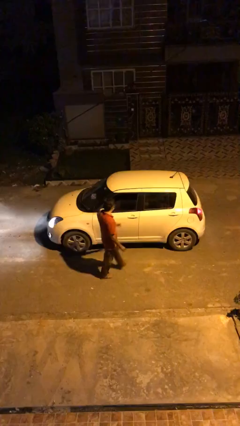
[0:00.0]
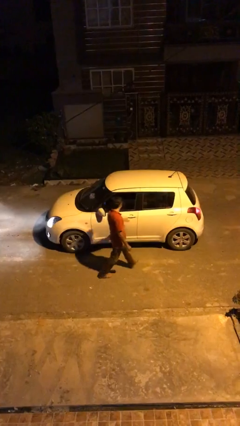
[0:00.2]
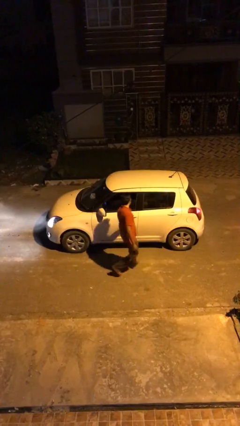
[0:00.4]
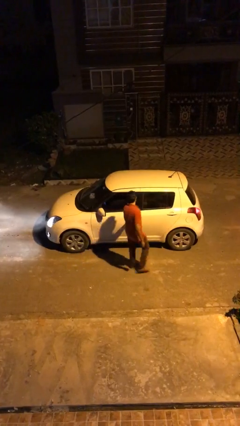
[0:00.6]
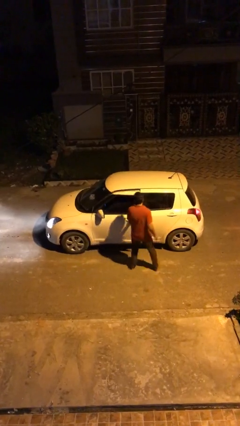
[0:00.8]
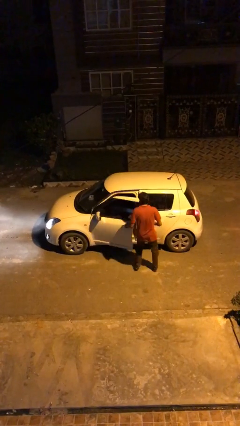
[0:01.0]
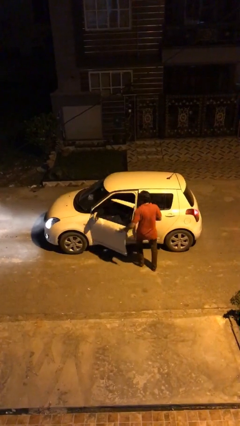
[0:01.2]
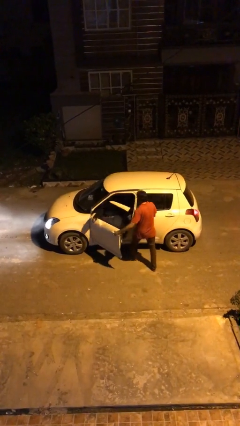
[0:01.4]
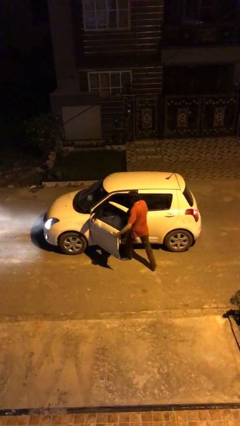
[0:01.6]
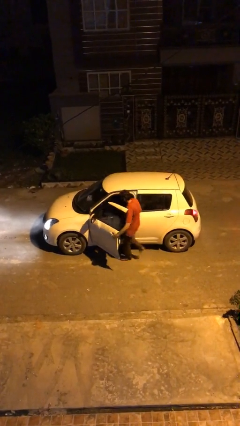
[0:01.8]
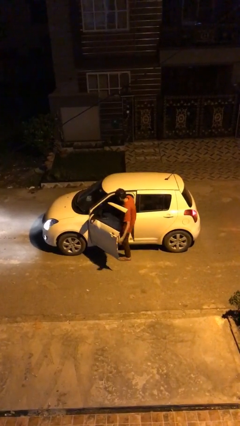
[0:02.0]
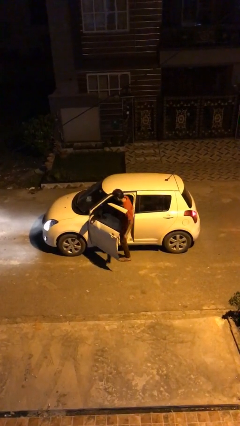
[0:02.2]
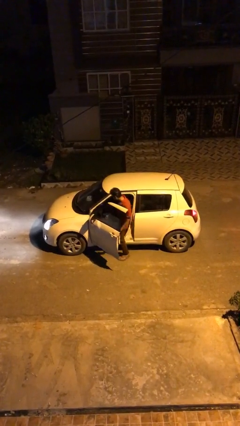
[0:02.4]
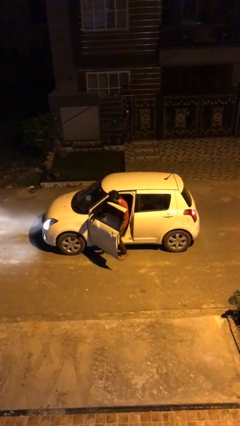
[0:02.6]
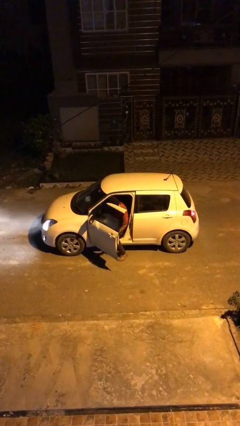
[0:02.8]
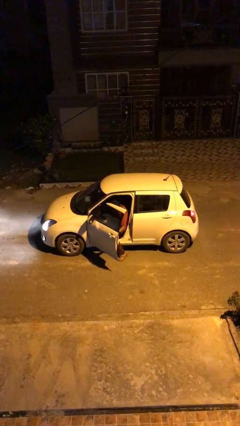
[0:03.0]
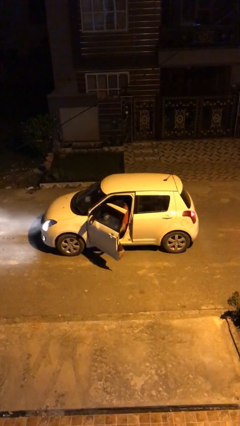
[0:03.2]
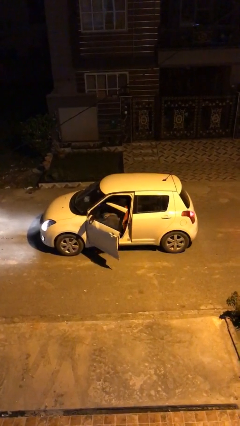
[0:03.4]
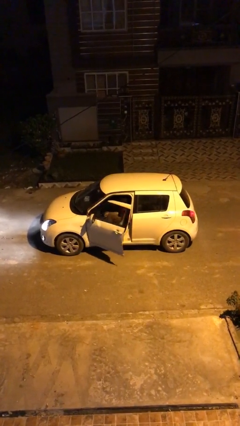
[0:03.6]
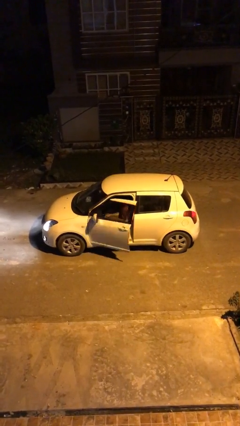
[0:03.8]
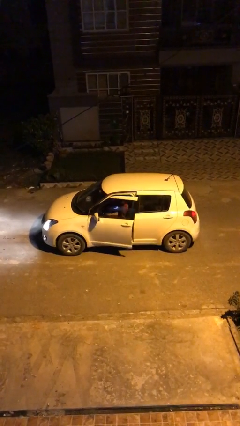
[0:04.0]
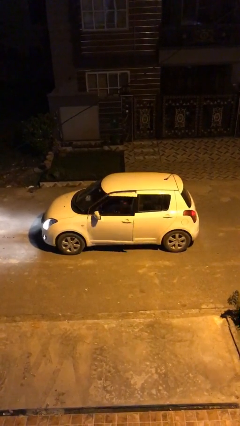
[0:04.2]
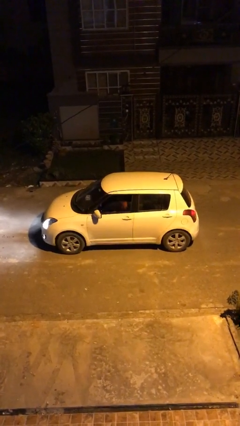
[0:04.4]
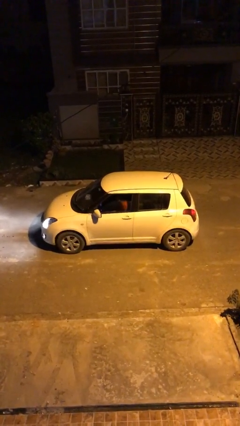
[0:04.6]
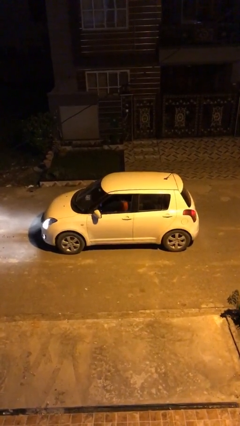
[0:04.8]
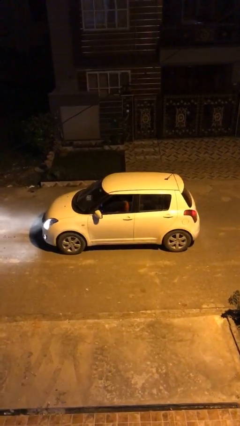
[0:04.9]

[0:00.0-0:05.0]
car picks up person

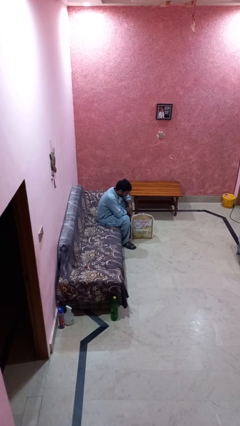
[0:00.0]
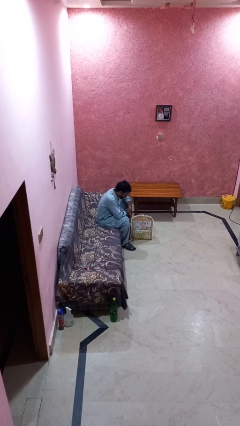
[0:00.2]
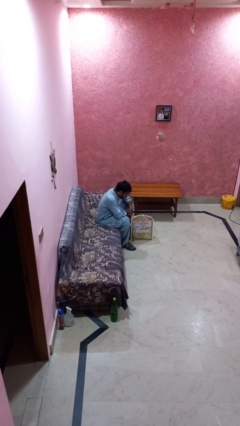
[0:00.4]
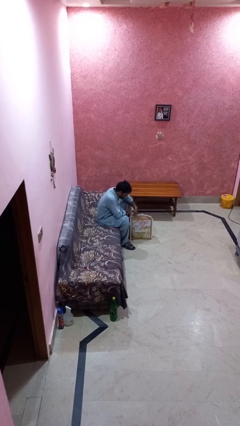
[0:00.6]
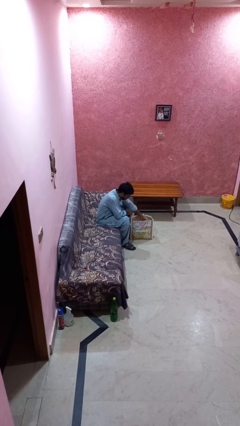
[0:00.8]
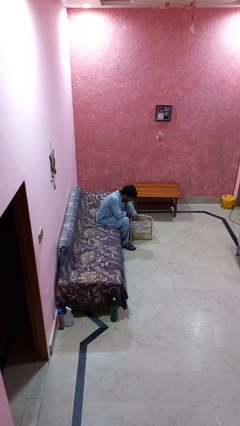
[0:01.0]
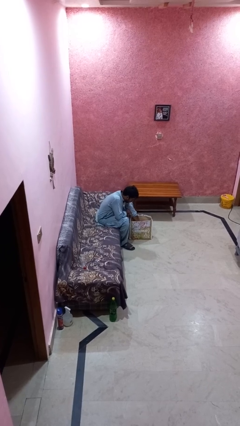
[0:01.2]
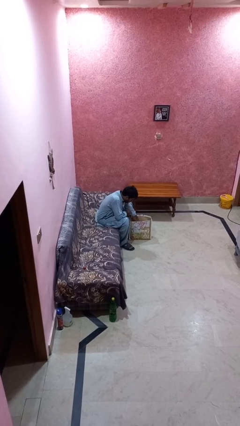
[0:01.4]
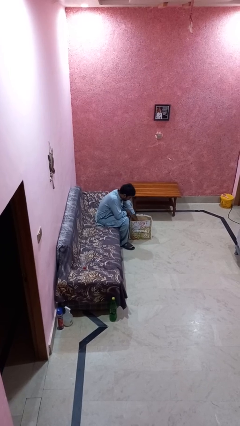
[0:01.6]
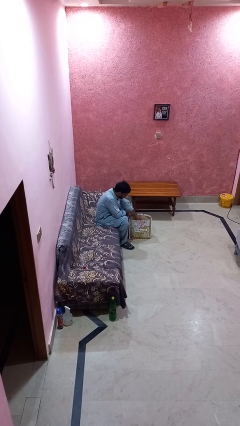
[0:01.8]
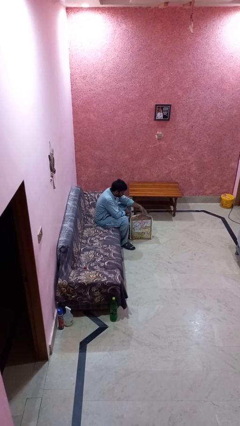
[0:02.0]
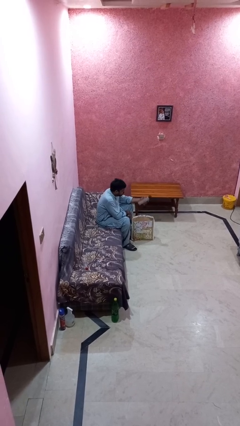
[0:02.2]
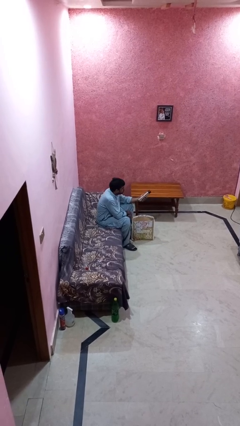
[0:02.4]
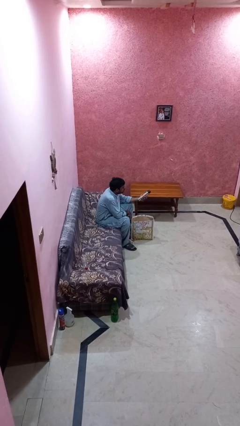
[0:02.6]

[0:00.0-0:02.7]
person takes object from bag

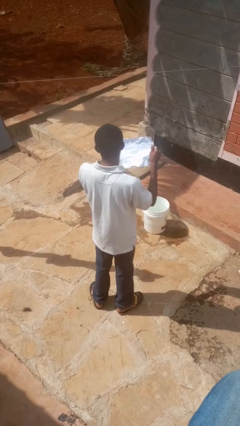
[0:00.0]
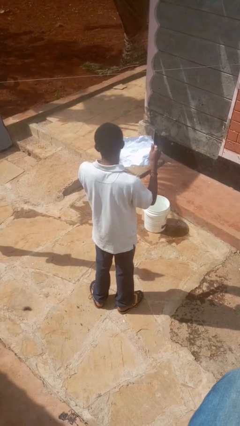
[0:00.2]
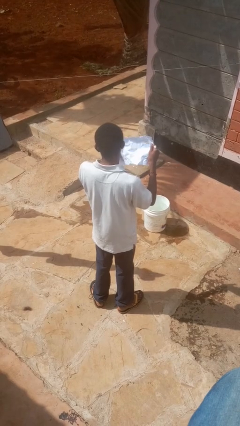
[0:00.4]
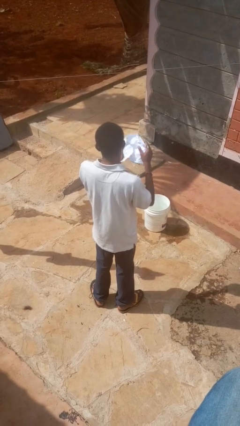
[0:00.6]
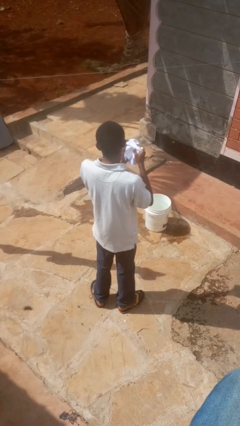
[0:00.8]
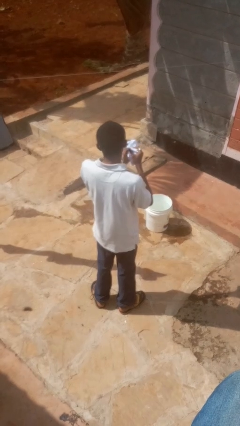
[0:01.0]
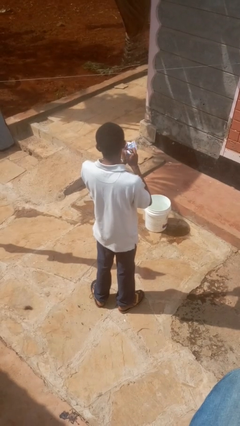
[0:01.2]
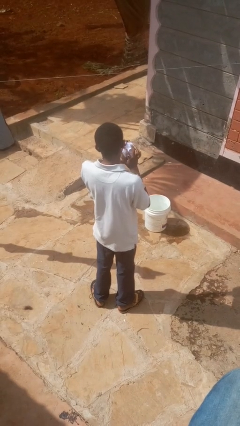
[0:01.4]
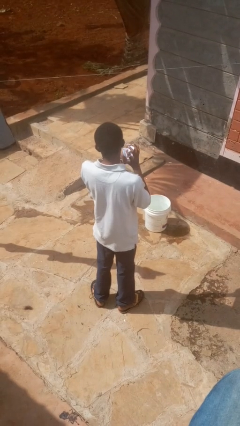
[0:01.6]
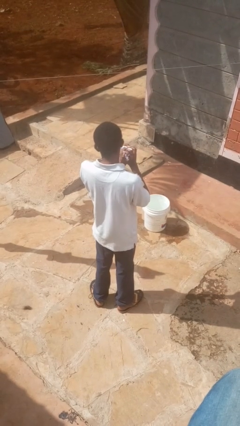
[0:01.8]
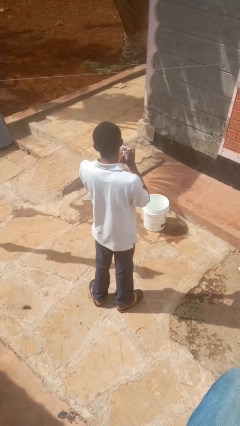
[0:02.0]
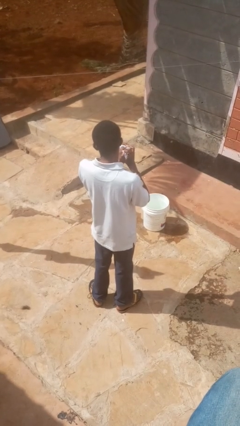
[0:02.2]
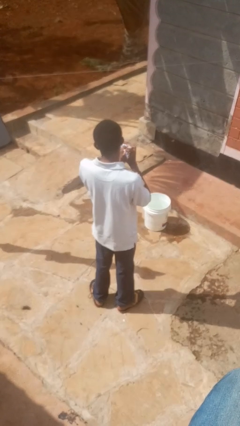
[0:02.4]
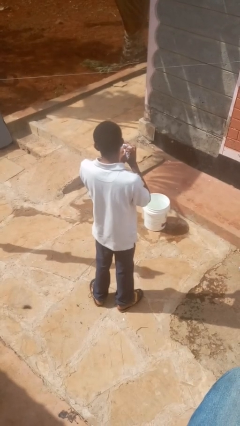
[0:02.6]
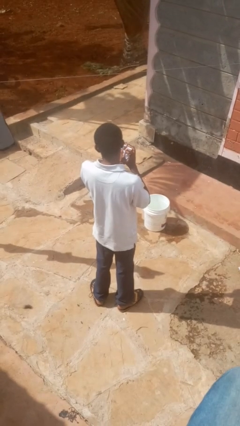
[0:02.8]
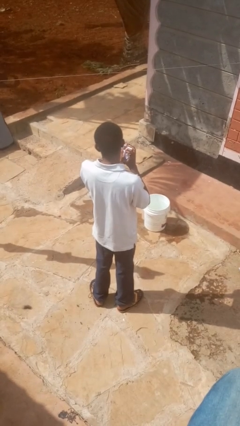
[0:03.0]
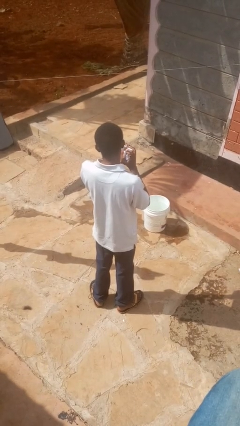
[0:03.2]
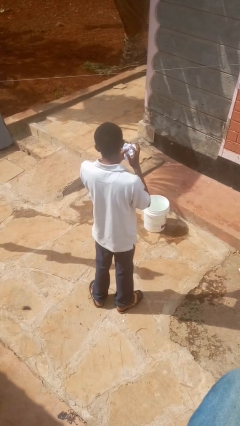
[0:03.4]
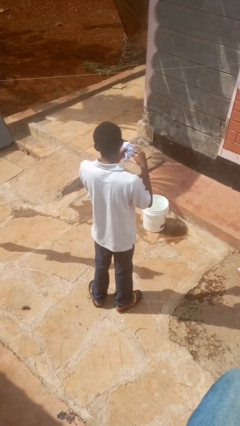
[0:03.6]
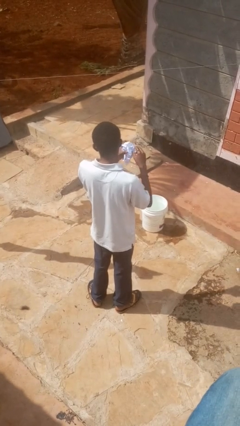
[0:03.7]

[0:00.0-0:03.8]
person crumples paper

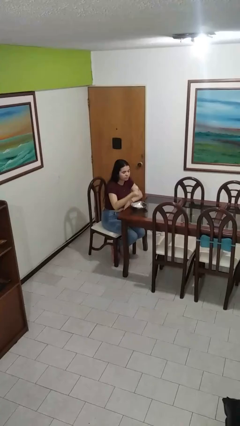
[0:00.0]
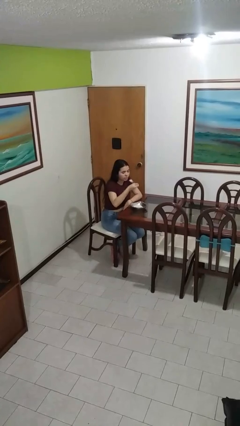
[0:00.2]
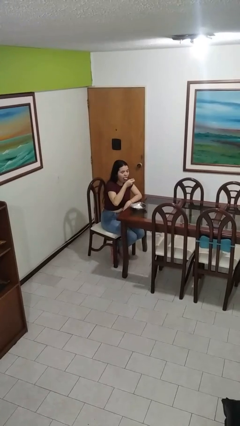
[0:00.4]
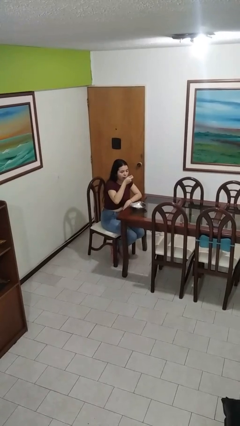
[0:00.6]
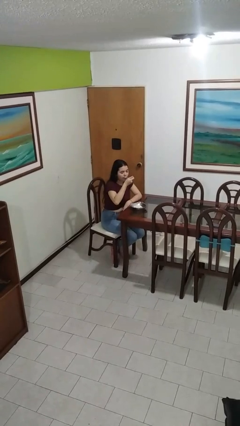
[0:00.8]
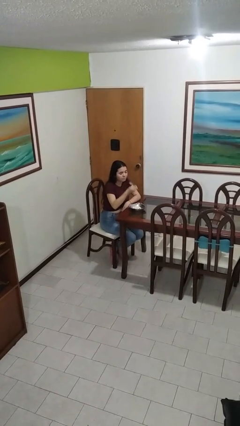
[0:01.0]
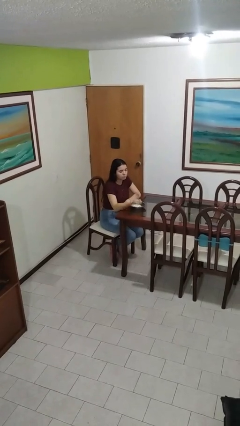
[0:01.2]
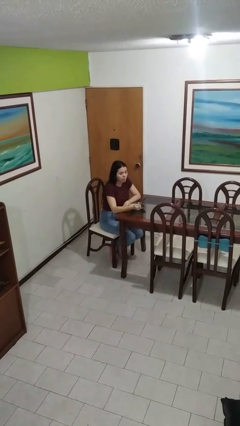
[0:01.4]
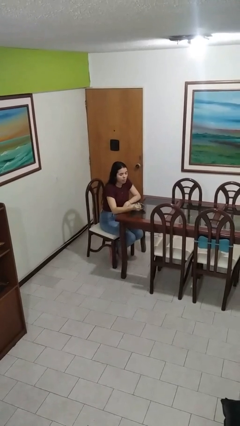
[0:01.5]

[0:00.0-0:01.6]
person eats with utensil

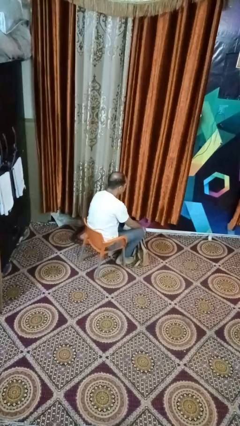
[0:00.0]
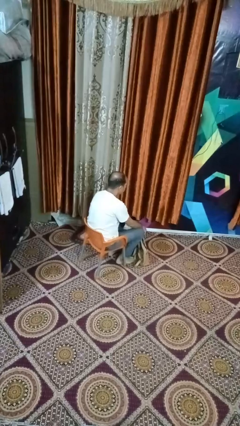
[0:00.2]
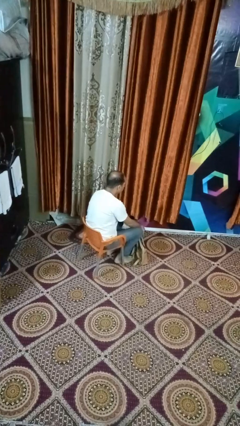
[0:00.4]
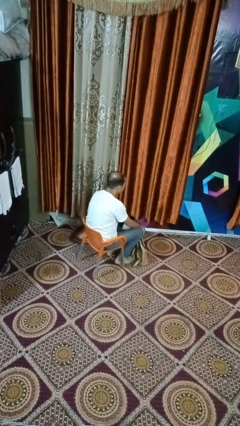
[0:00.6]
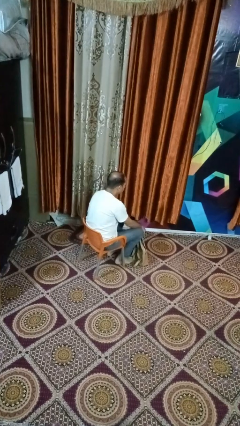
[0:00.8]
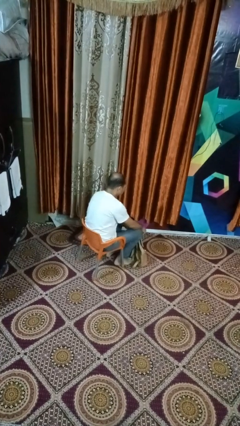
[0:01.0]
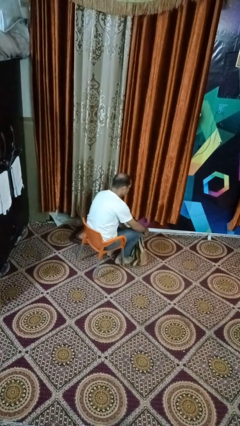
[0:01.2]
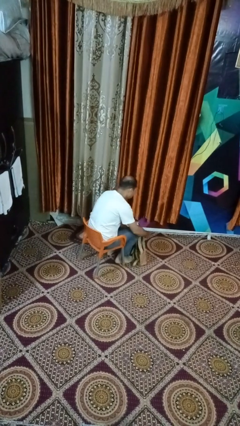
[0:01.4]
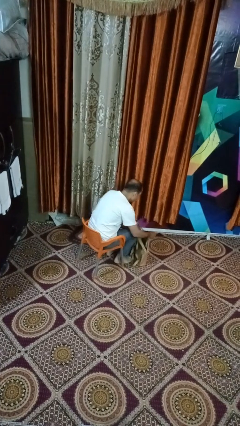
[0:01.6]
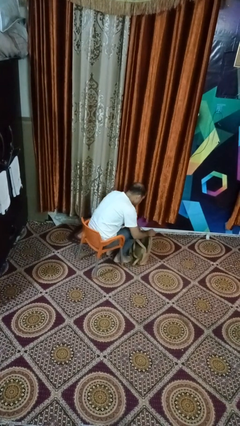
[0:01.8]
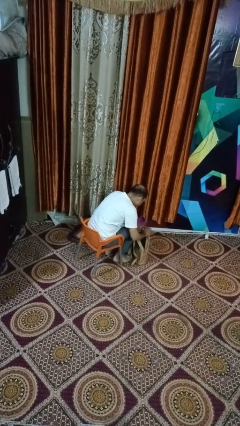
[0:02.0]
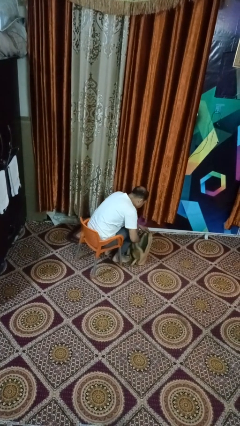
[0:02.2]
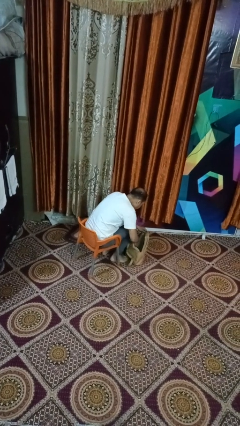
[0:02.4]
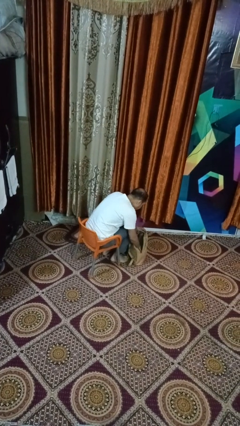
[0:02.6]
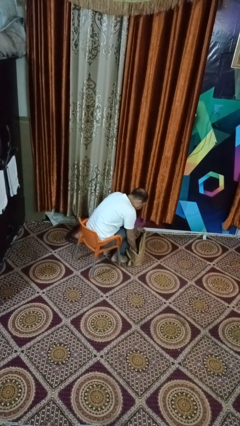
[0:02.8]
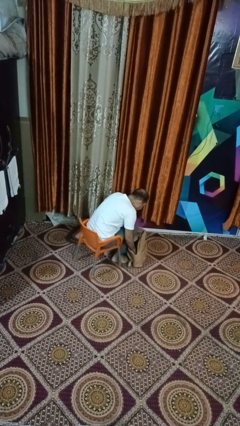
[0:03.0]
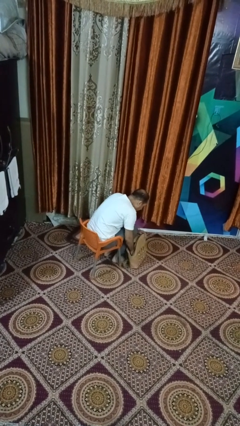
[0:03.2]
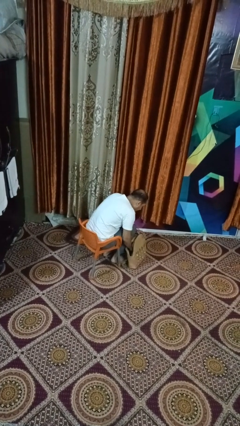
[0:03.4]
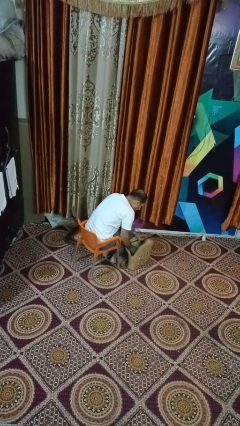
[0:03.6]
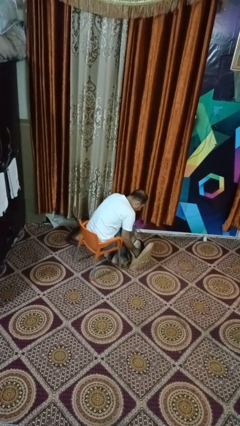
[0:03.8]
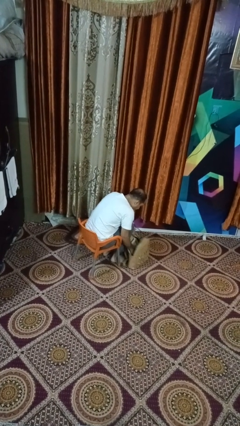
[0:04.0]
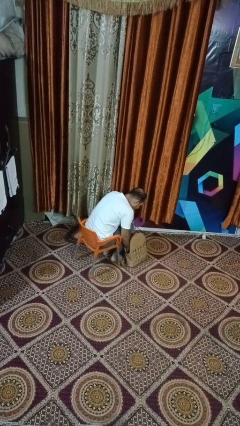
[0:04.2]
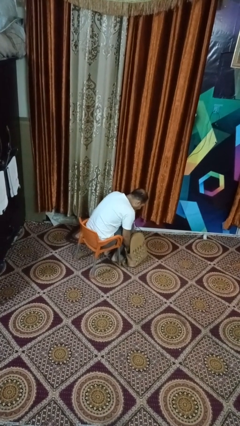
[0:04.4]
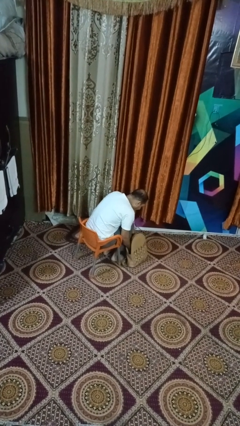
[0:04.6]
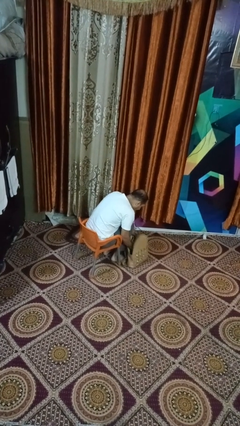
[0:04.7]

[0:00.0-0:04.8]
person searches in purse
